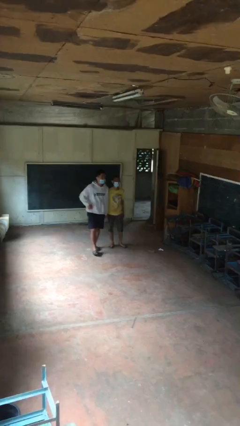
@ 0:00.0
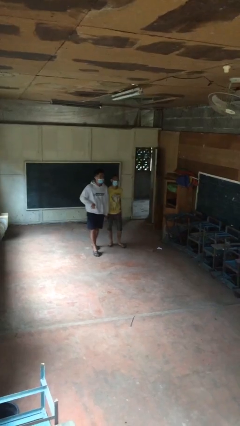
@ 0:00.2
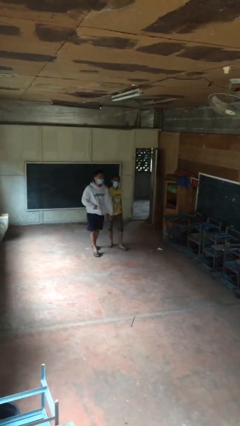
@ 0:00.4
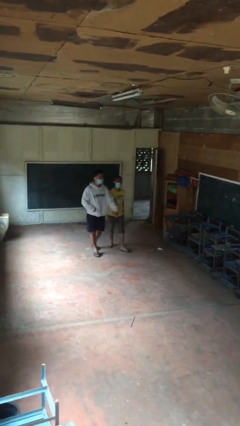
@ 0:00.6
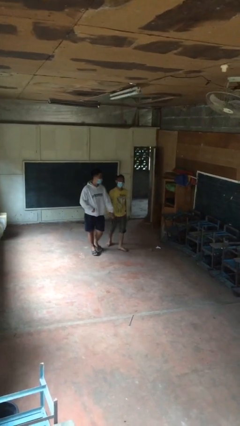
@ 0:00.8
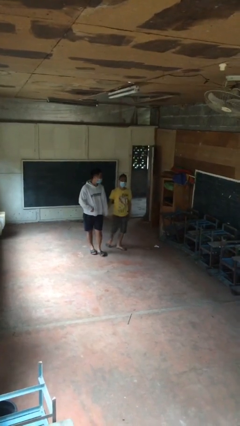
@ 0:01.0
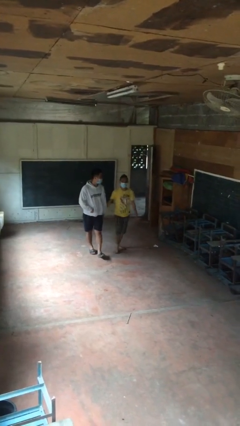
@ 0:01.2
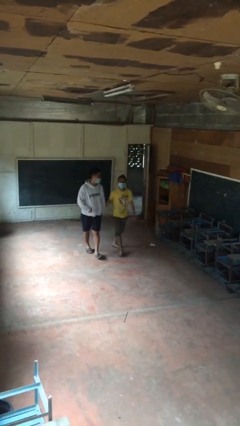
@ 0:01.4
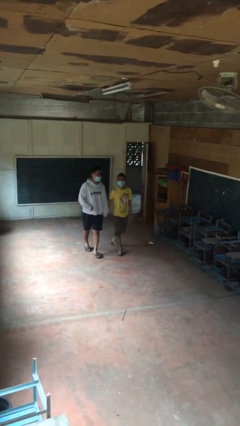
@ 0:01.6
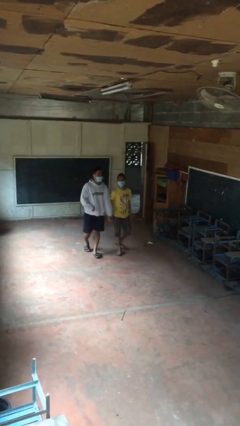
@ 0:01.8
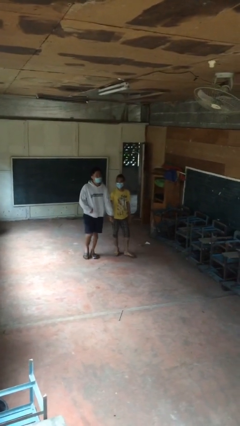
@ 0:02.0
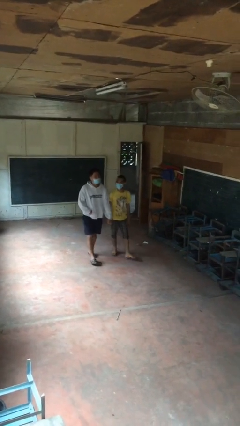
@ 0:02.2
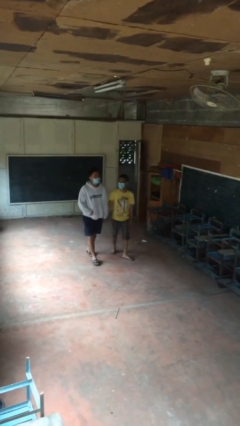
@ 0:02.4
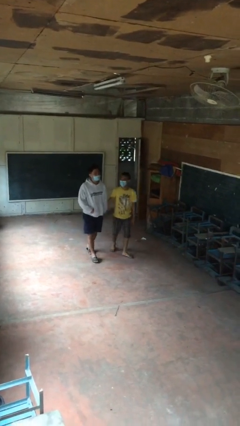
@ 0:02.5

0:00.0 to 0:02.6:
person holds hand

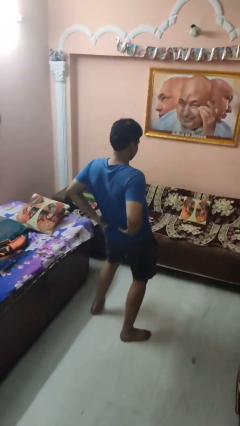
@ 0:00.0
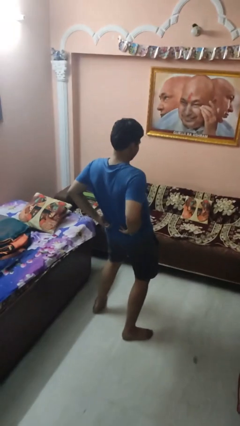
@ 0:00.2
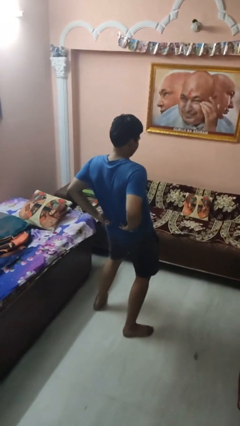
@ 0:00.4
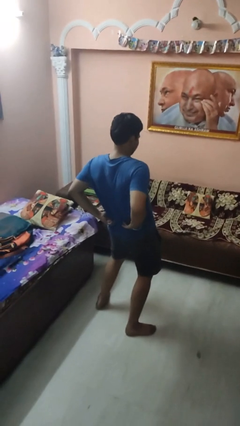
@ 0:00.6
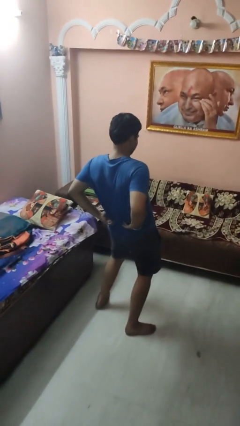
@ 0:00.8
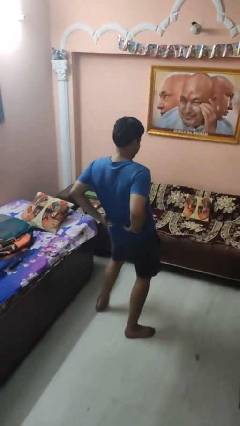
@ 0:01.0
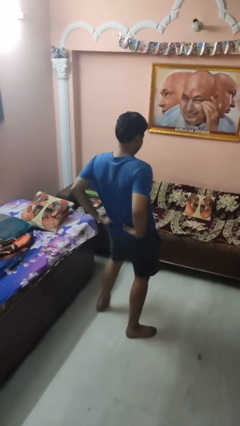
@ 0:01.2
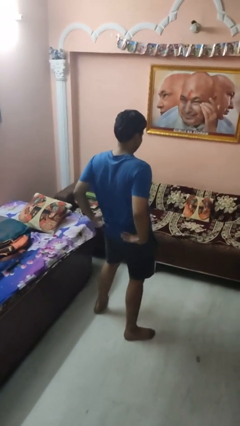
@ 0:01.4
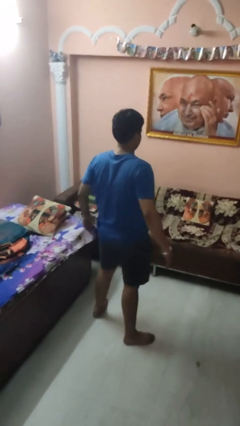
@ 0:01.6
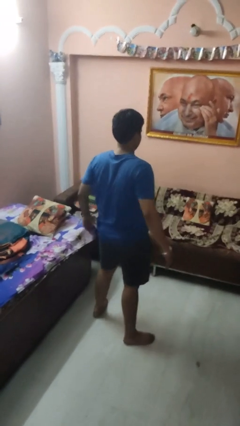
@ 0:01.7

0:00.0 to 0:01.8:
person stretches back

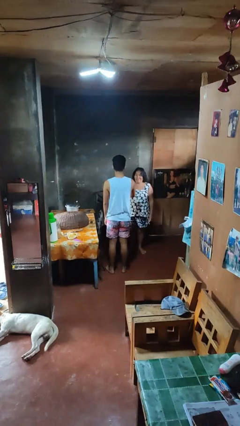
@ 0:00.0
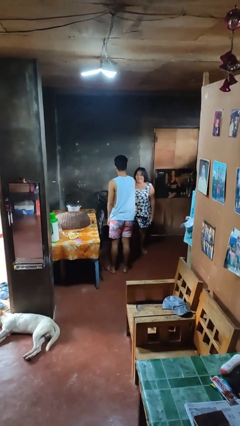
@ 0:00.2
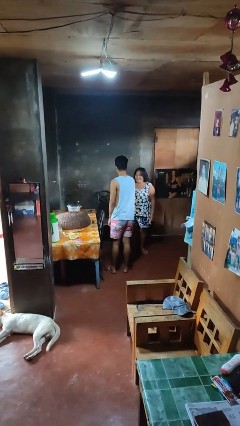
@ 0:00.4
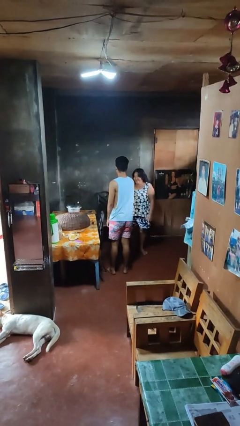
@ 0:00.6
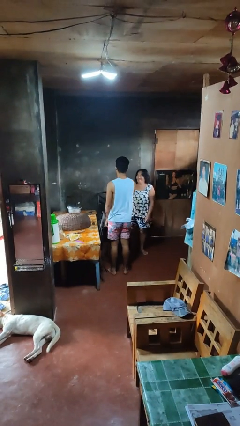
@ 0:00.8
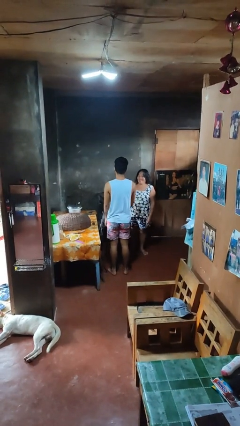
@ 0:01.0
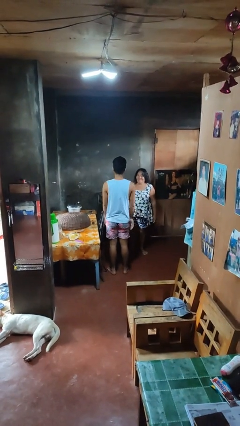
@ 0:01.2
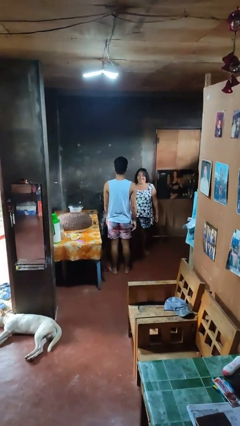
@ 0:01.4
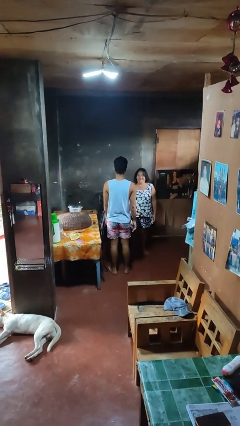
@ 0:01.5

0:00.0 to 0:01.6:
person shoves person

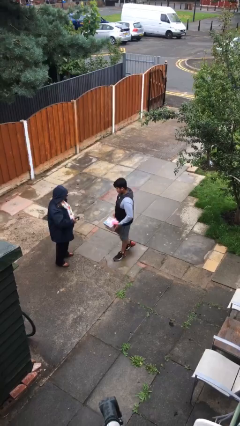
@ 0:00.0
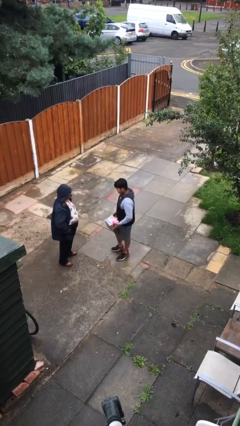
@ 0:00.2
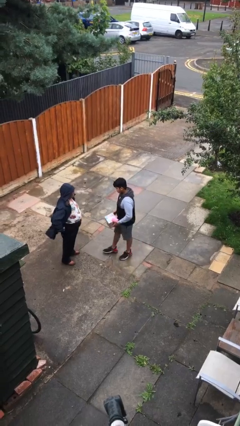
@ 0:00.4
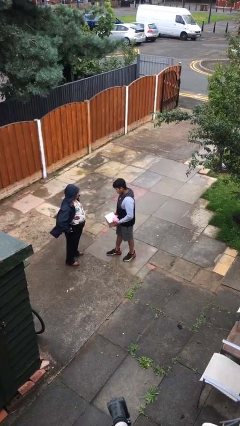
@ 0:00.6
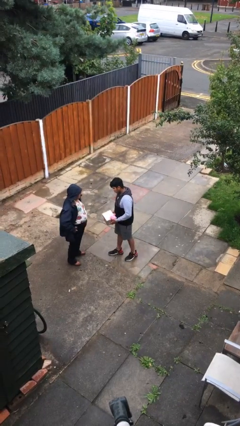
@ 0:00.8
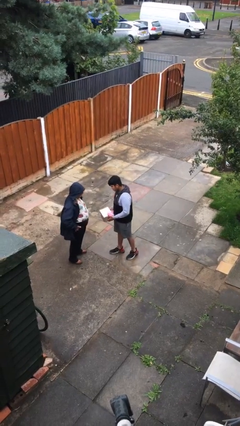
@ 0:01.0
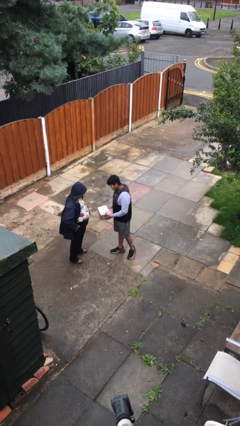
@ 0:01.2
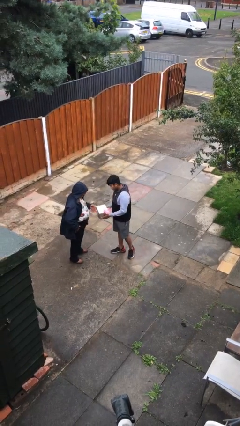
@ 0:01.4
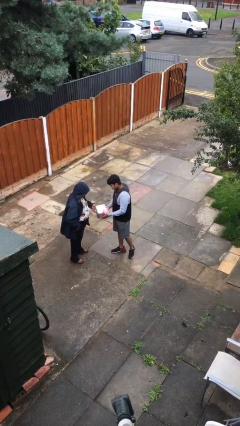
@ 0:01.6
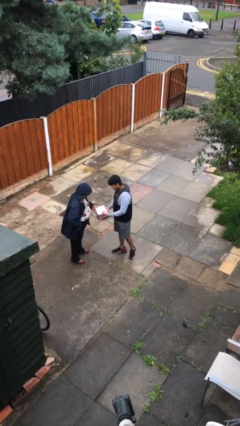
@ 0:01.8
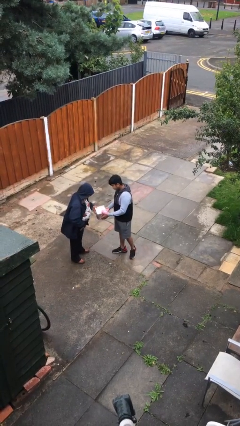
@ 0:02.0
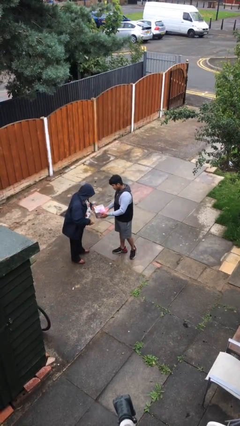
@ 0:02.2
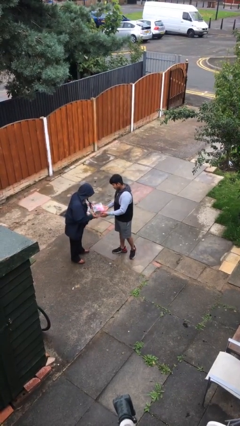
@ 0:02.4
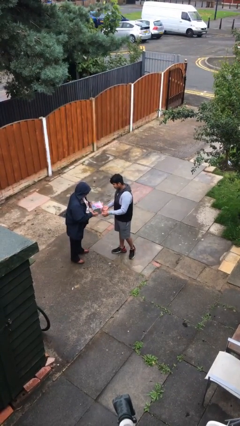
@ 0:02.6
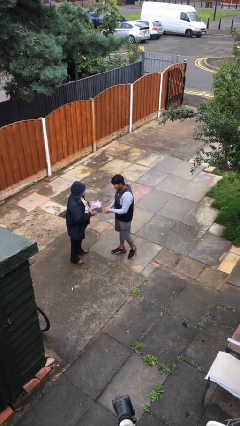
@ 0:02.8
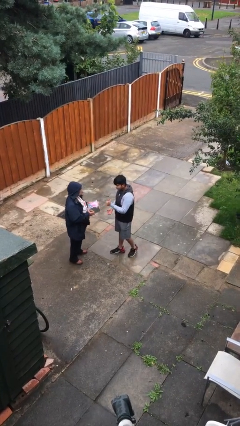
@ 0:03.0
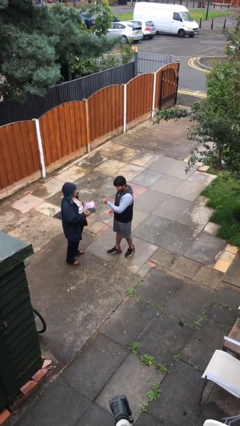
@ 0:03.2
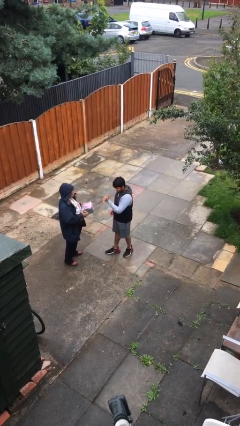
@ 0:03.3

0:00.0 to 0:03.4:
person transfers object to person

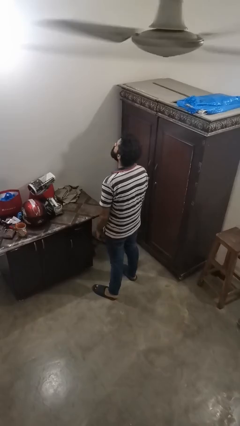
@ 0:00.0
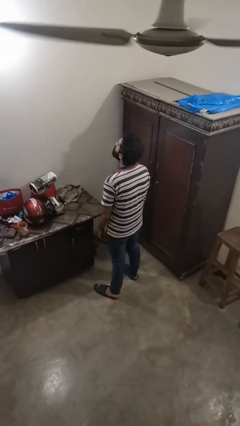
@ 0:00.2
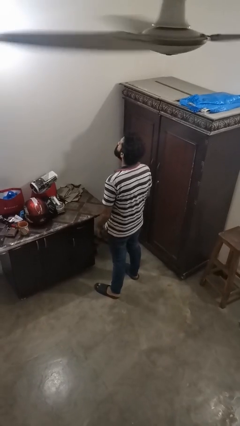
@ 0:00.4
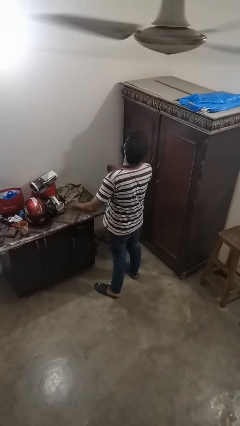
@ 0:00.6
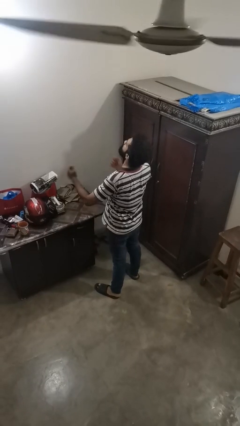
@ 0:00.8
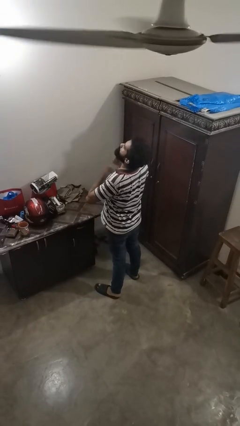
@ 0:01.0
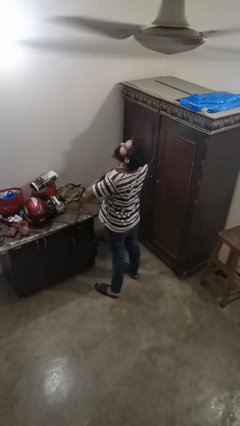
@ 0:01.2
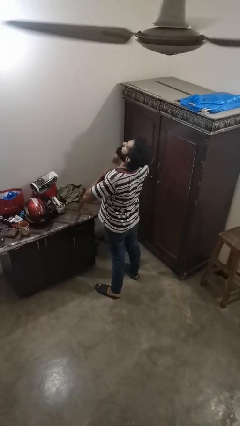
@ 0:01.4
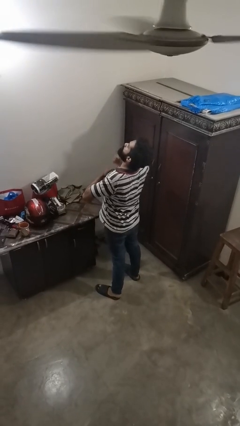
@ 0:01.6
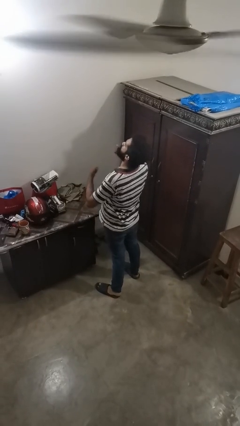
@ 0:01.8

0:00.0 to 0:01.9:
person drums on chest

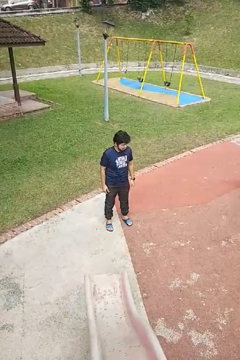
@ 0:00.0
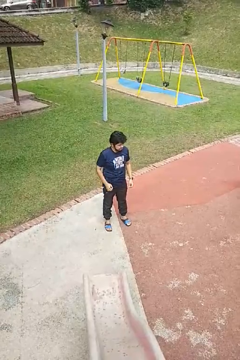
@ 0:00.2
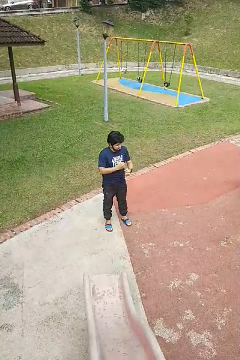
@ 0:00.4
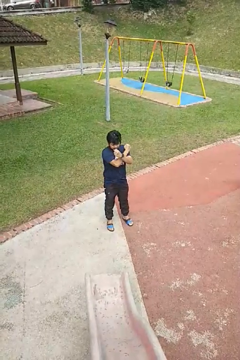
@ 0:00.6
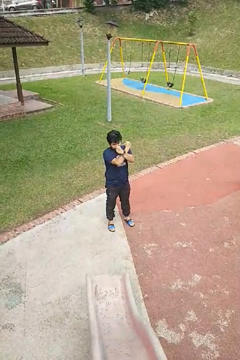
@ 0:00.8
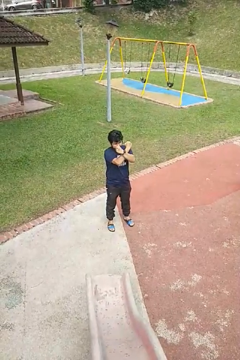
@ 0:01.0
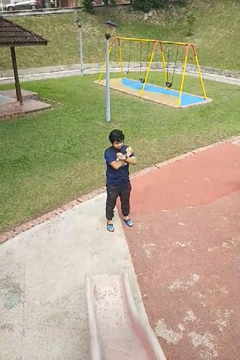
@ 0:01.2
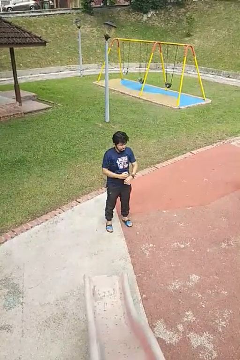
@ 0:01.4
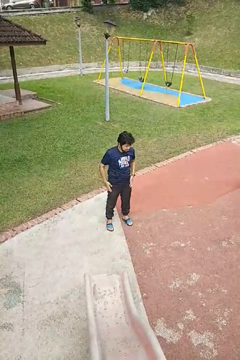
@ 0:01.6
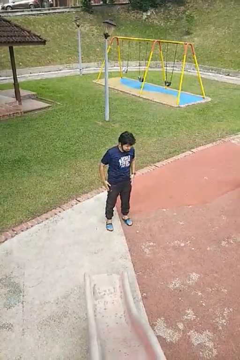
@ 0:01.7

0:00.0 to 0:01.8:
person gestures arms x

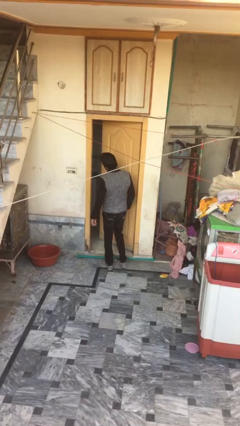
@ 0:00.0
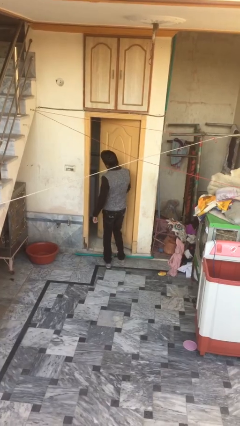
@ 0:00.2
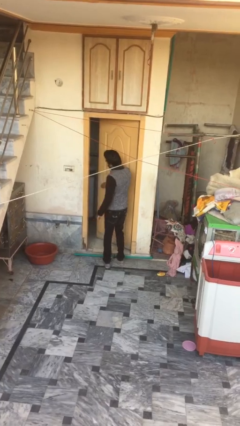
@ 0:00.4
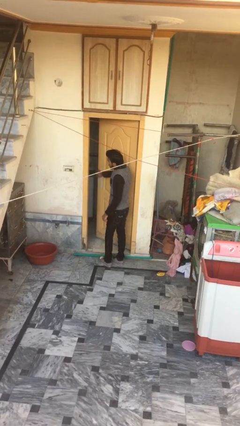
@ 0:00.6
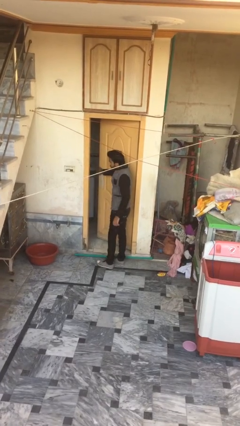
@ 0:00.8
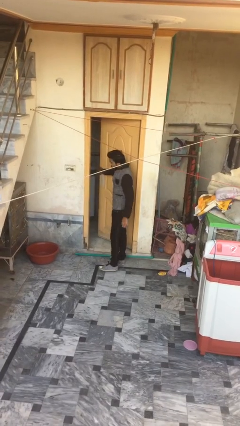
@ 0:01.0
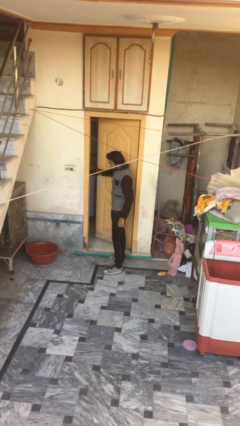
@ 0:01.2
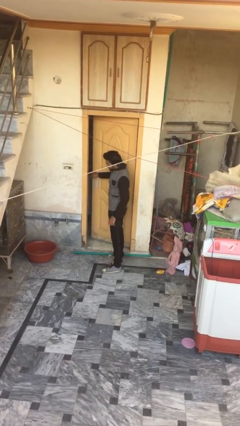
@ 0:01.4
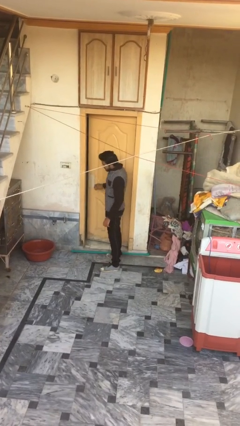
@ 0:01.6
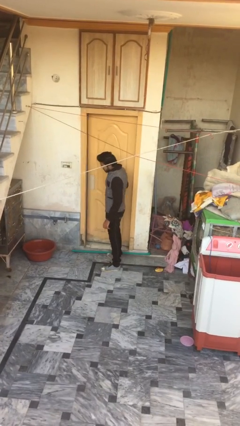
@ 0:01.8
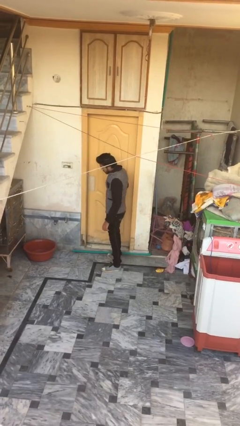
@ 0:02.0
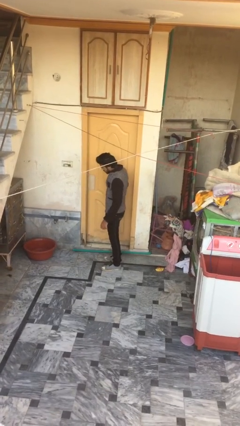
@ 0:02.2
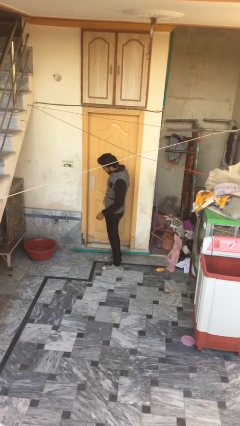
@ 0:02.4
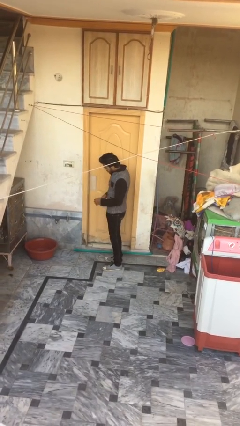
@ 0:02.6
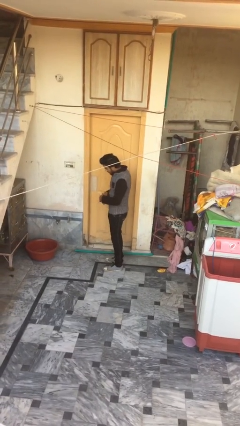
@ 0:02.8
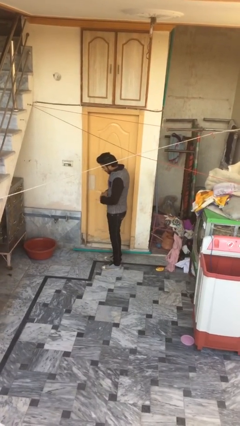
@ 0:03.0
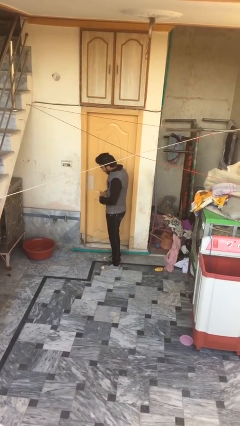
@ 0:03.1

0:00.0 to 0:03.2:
person closes facility door

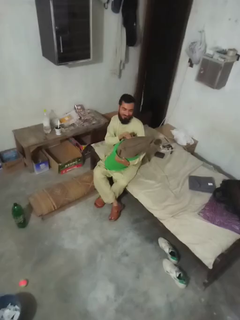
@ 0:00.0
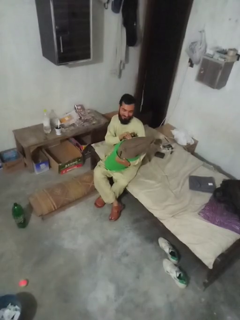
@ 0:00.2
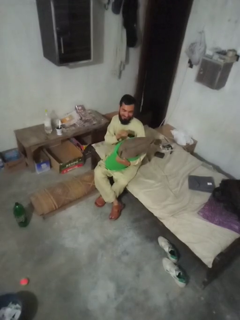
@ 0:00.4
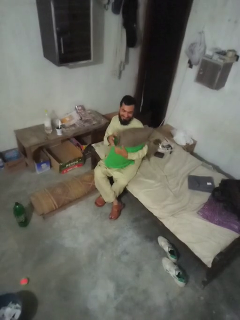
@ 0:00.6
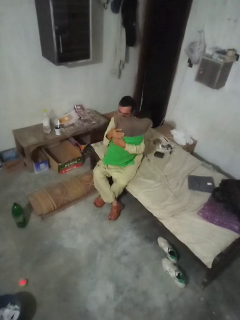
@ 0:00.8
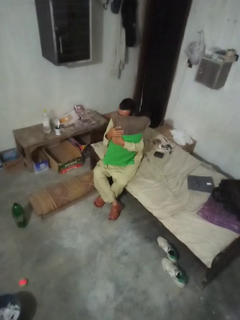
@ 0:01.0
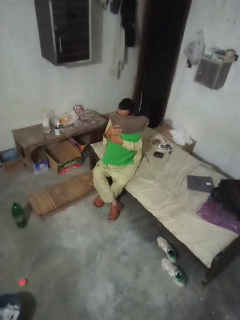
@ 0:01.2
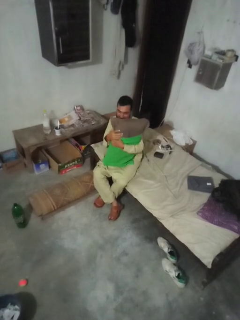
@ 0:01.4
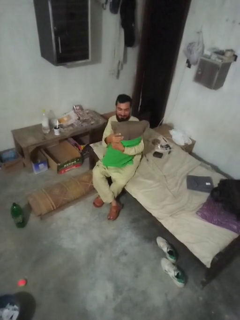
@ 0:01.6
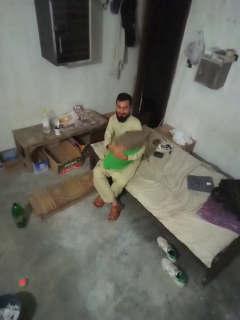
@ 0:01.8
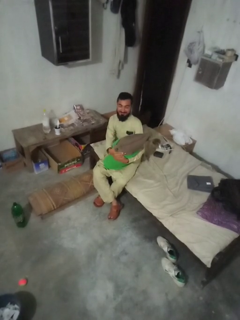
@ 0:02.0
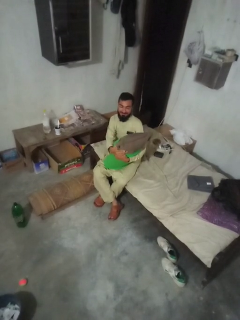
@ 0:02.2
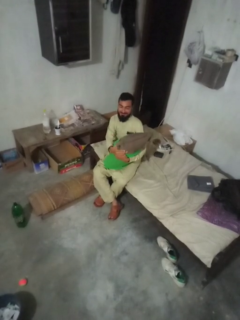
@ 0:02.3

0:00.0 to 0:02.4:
person hugs stuffed animal
